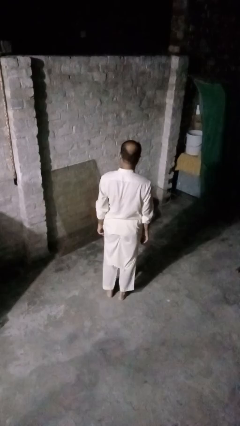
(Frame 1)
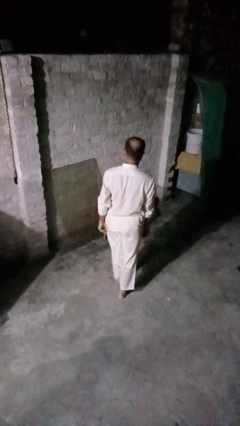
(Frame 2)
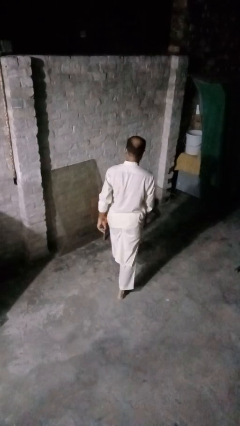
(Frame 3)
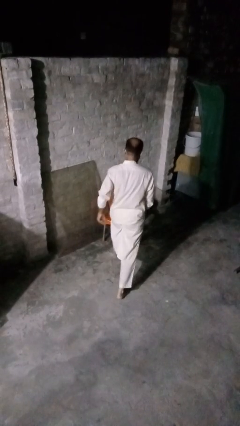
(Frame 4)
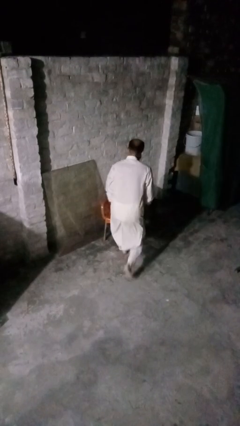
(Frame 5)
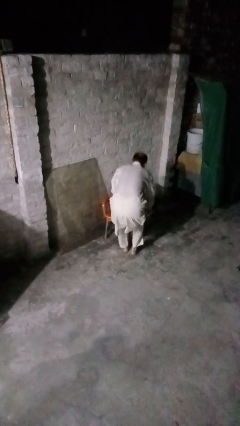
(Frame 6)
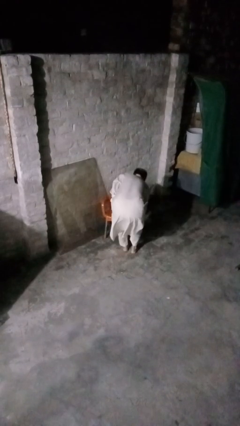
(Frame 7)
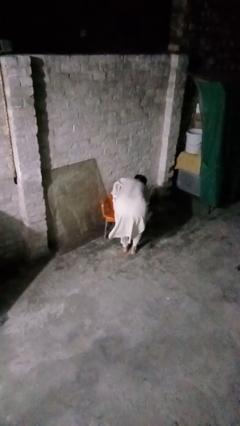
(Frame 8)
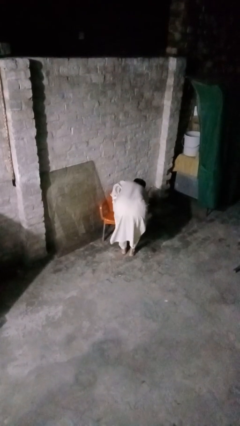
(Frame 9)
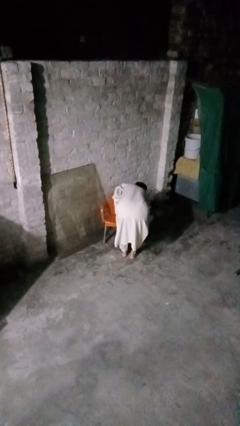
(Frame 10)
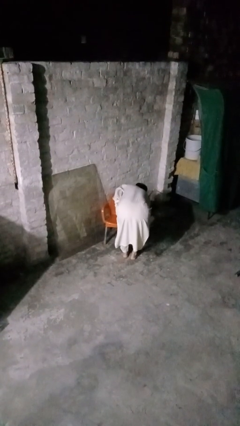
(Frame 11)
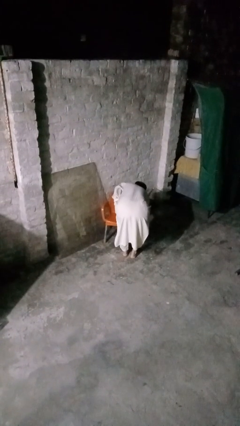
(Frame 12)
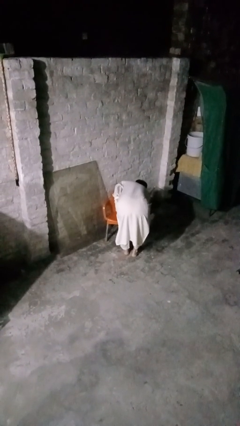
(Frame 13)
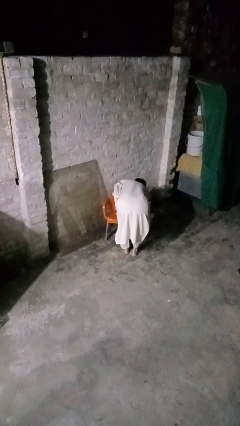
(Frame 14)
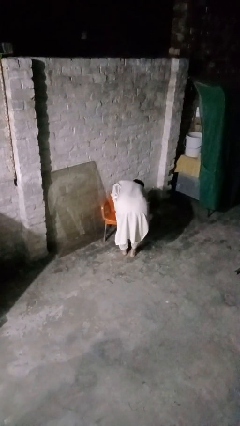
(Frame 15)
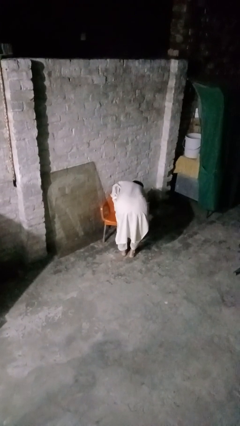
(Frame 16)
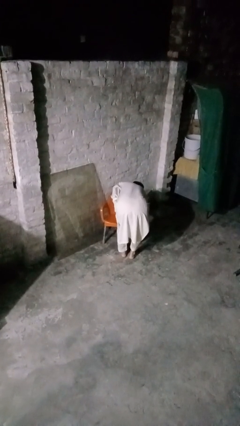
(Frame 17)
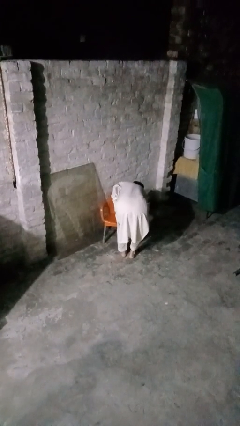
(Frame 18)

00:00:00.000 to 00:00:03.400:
person stubs toe

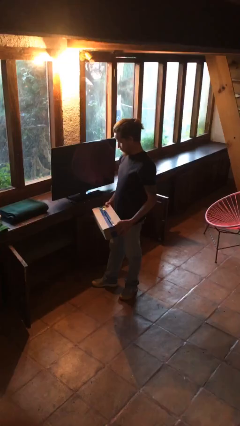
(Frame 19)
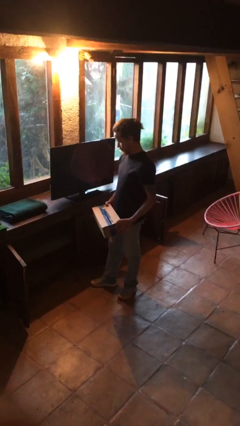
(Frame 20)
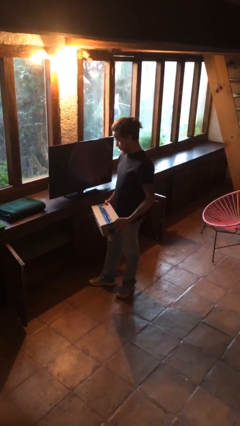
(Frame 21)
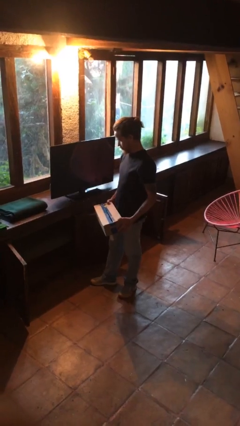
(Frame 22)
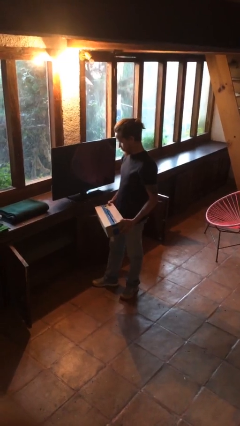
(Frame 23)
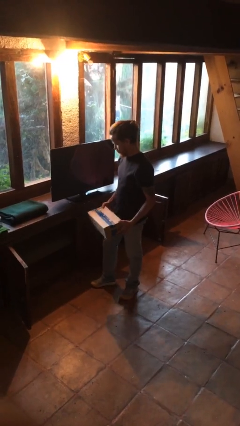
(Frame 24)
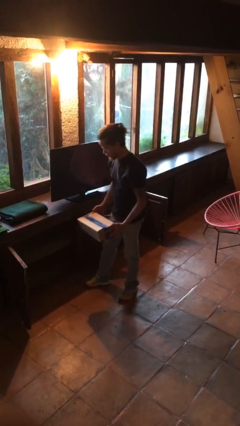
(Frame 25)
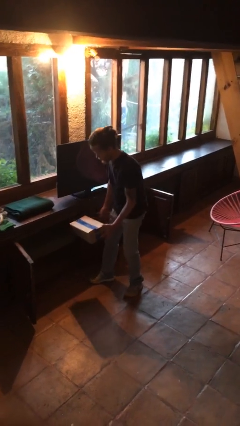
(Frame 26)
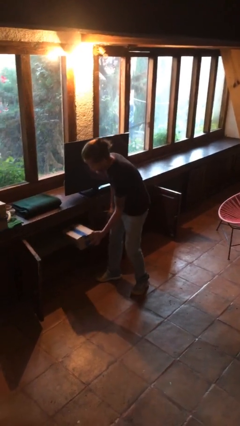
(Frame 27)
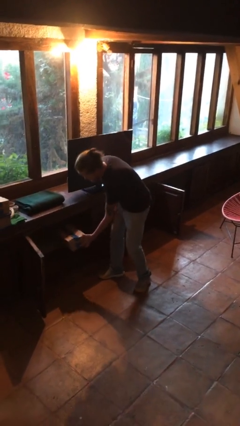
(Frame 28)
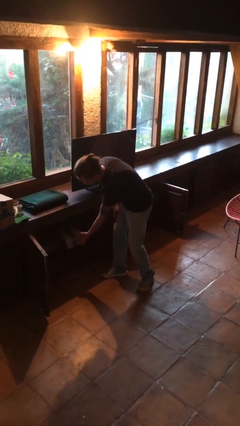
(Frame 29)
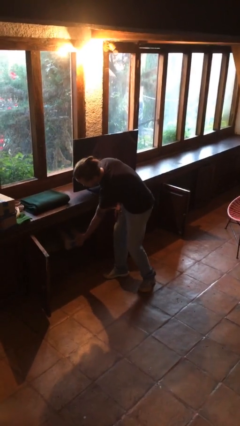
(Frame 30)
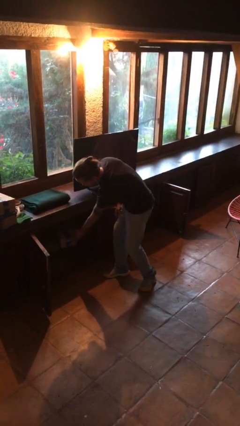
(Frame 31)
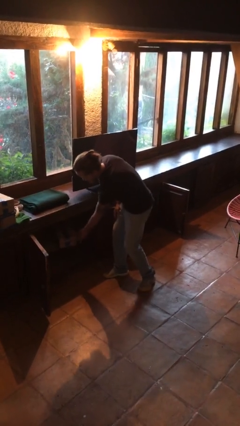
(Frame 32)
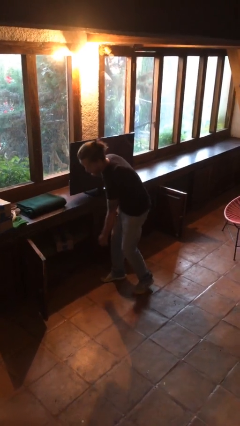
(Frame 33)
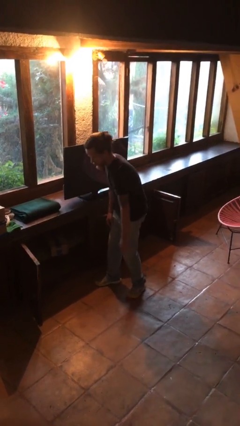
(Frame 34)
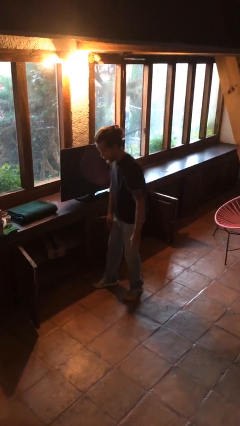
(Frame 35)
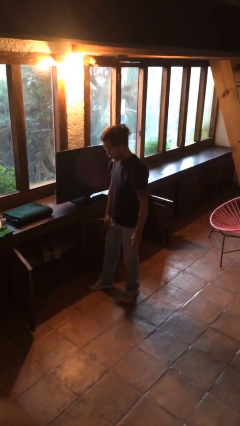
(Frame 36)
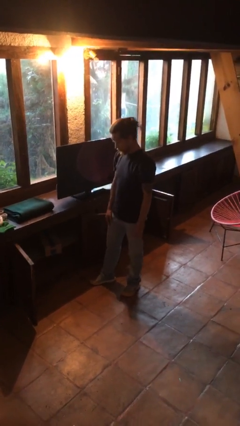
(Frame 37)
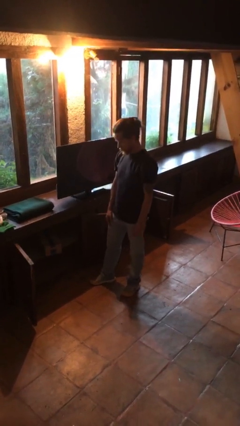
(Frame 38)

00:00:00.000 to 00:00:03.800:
person puts down object into cabinet

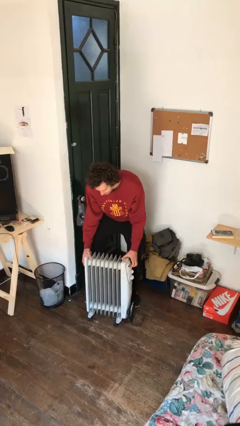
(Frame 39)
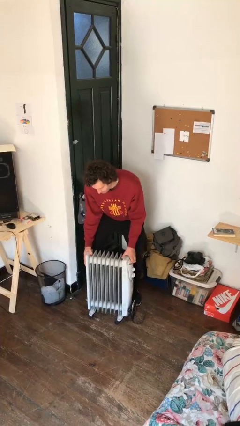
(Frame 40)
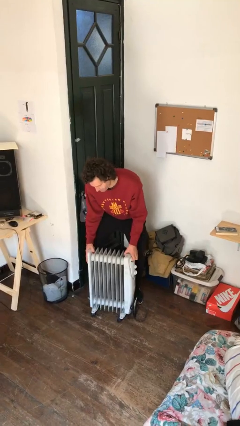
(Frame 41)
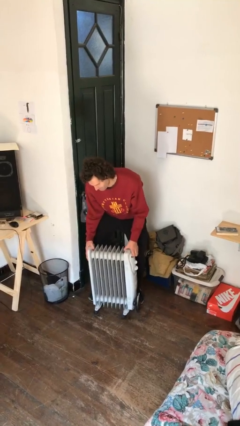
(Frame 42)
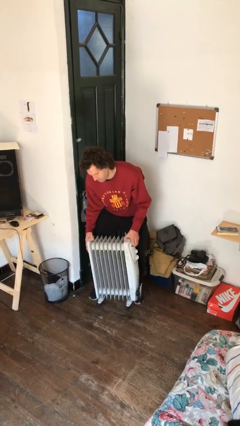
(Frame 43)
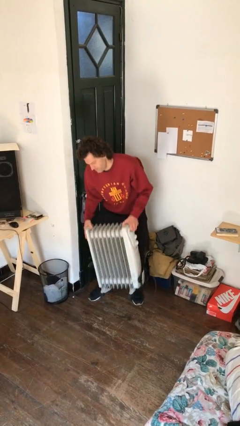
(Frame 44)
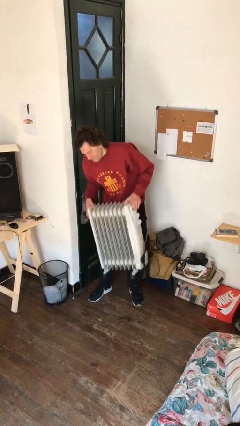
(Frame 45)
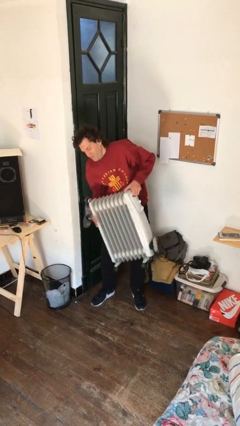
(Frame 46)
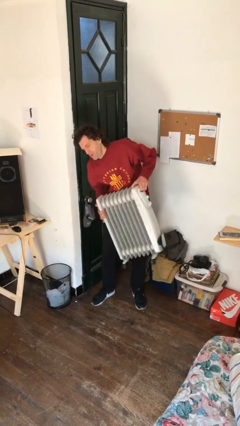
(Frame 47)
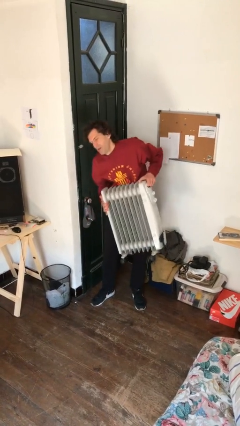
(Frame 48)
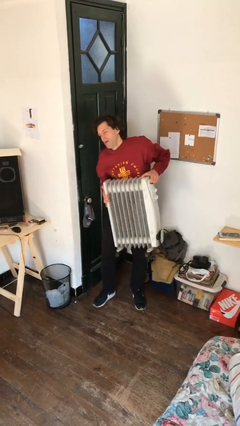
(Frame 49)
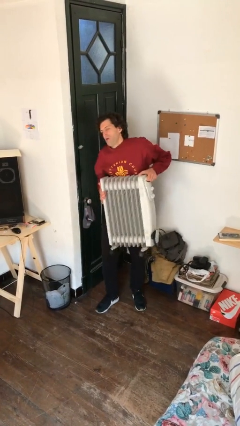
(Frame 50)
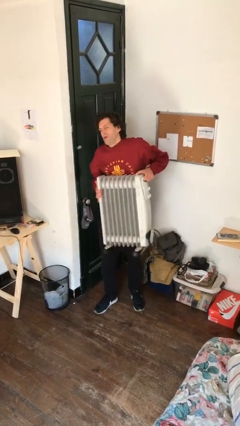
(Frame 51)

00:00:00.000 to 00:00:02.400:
person picks up object from floor

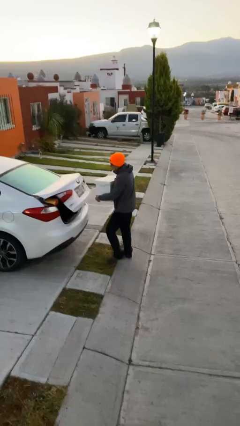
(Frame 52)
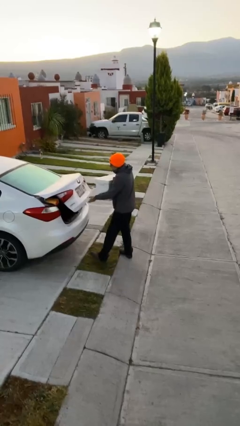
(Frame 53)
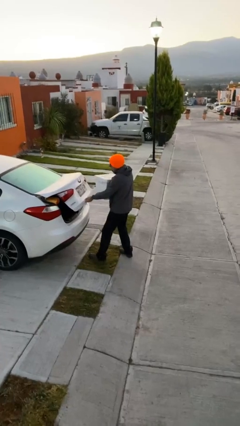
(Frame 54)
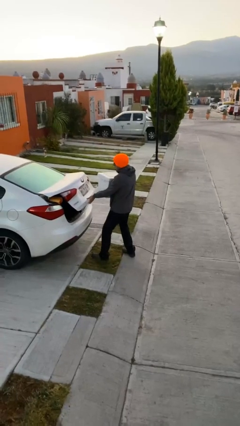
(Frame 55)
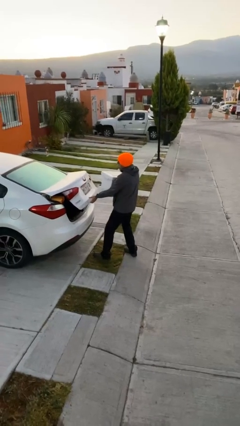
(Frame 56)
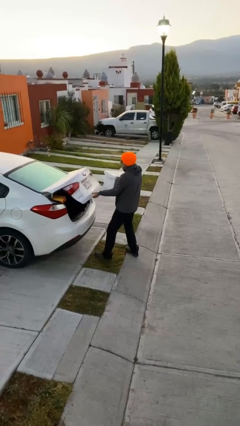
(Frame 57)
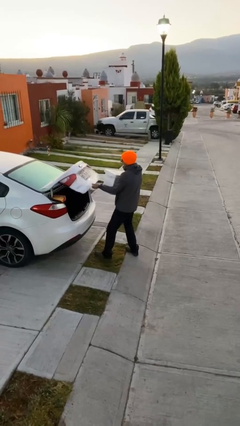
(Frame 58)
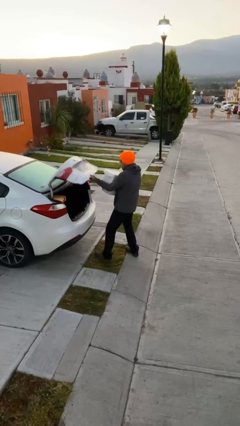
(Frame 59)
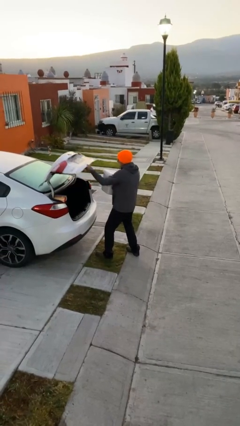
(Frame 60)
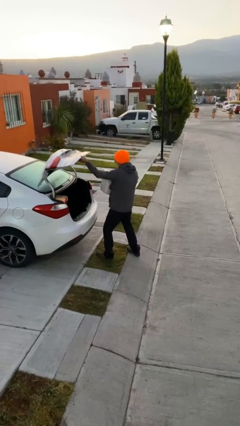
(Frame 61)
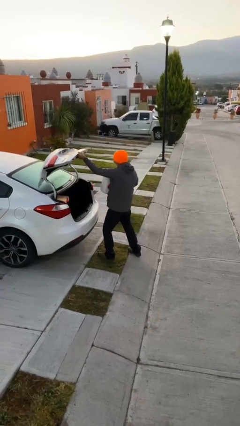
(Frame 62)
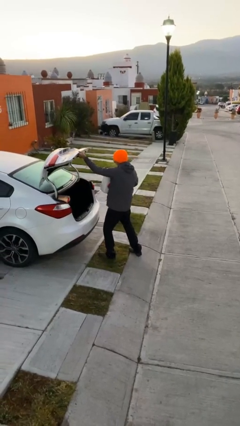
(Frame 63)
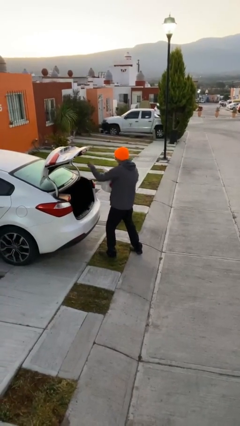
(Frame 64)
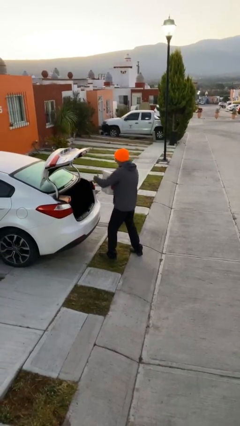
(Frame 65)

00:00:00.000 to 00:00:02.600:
person opens car trunk

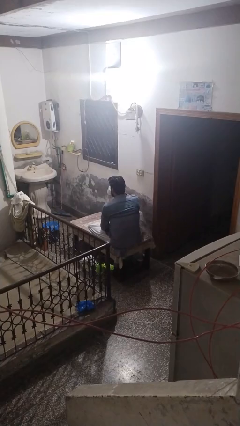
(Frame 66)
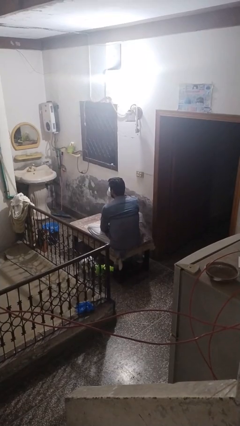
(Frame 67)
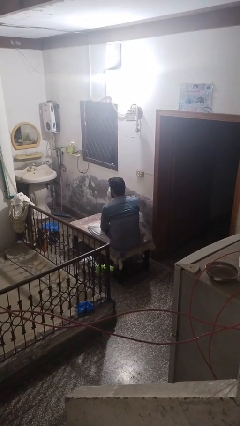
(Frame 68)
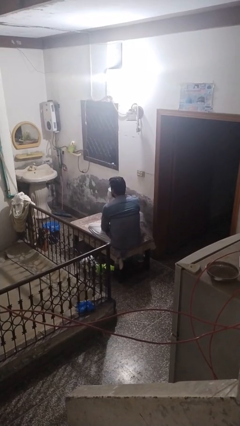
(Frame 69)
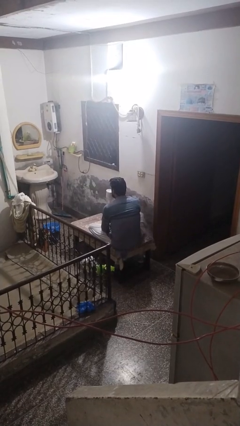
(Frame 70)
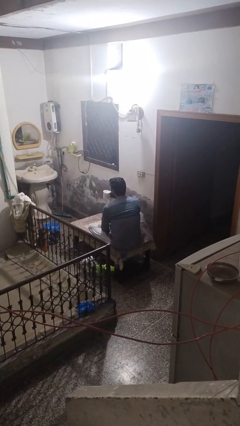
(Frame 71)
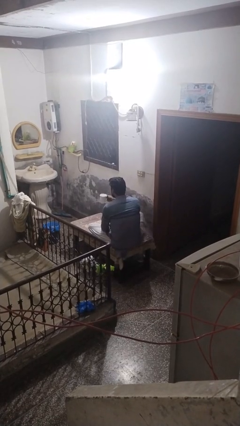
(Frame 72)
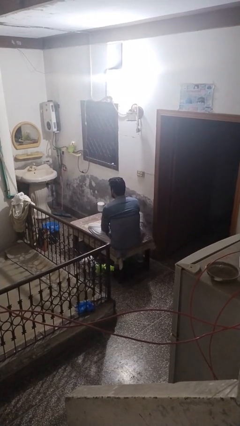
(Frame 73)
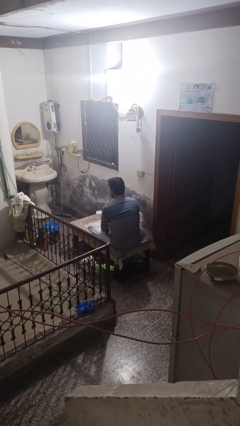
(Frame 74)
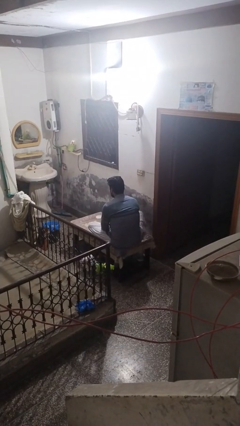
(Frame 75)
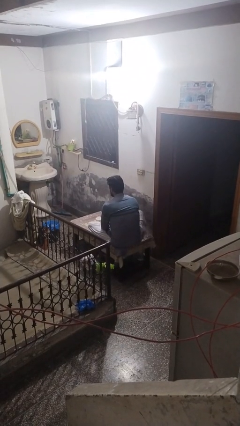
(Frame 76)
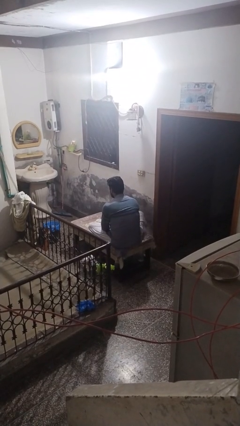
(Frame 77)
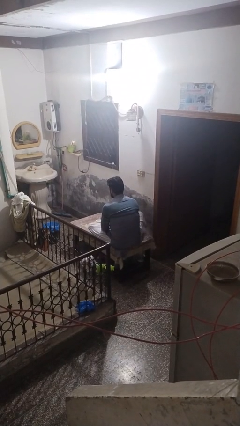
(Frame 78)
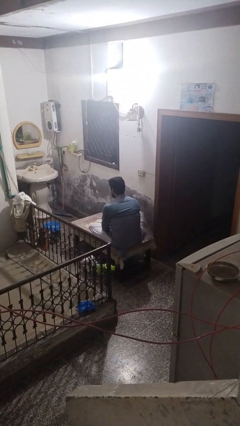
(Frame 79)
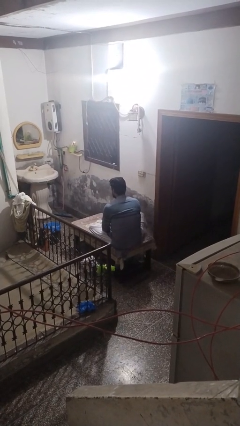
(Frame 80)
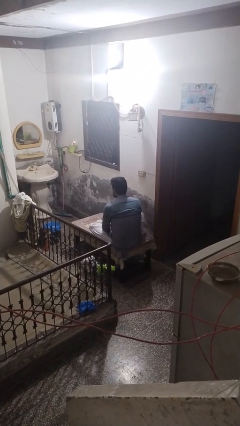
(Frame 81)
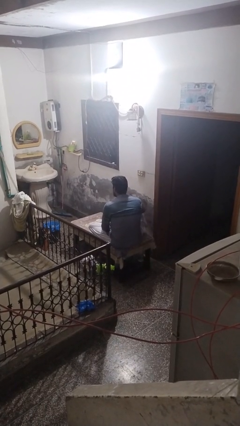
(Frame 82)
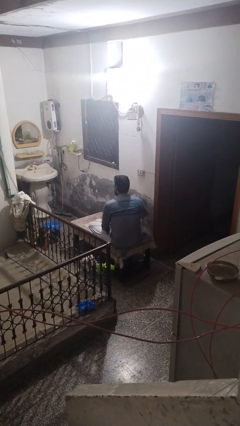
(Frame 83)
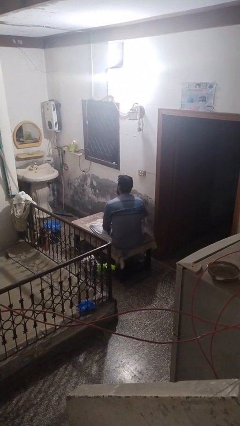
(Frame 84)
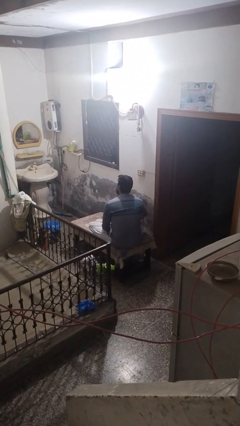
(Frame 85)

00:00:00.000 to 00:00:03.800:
person puts down object on table

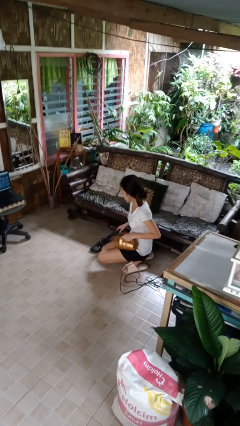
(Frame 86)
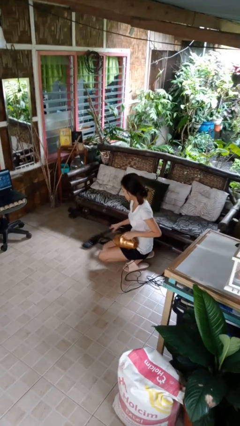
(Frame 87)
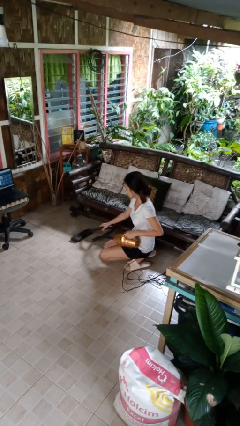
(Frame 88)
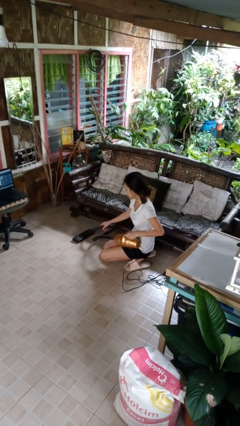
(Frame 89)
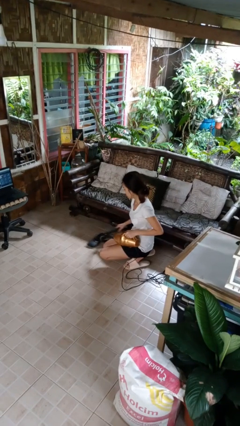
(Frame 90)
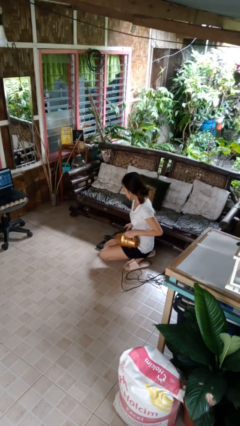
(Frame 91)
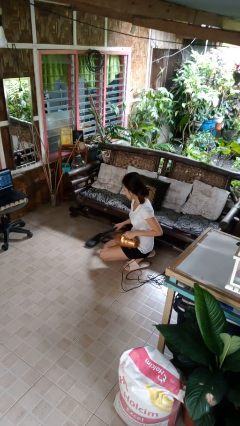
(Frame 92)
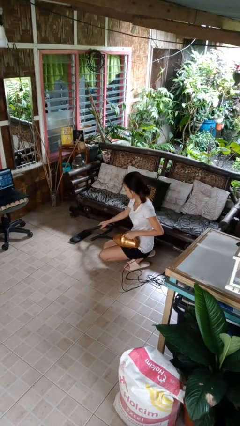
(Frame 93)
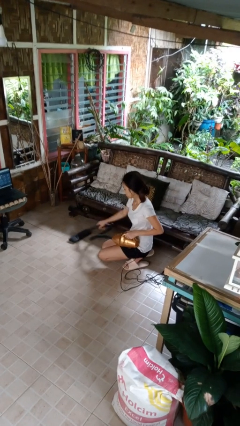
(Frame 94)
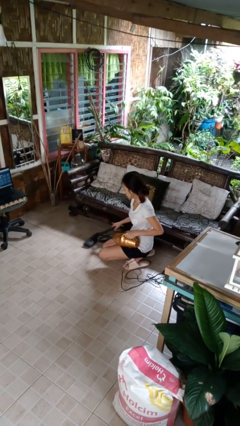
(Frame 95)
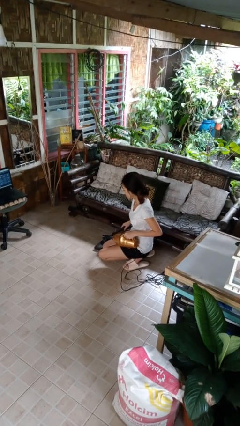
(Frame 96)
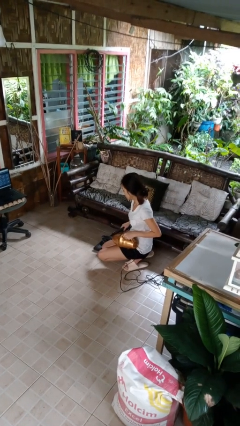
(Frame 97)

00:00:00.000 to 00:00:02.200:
person vacuums carpet
